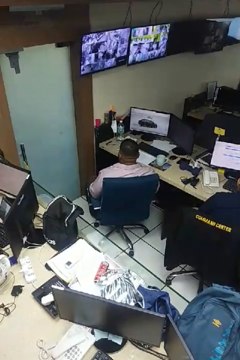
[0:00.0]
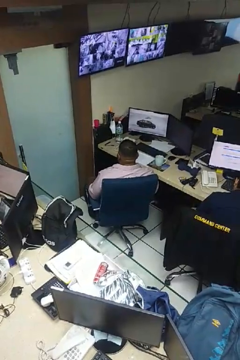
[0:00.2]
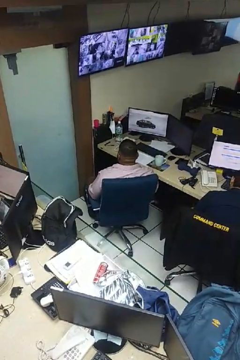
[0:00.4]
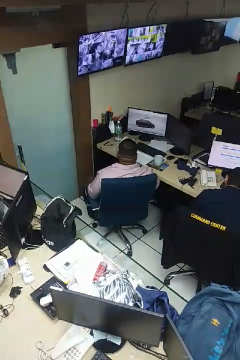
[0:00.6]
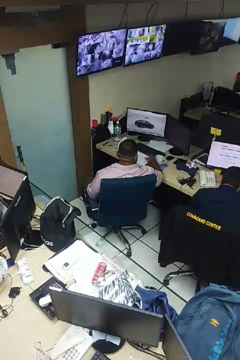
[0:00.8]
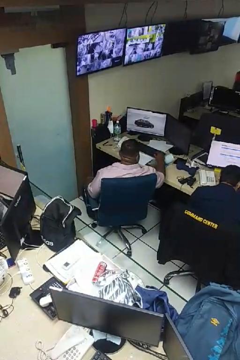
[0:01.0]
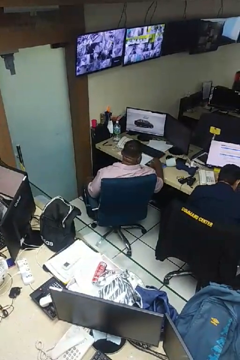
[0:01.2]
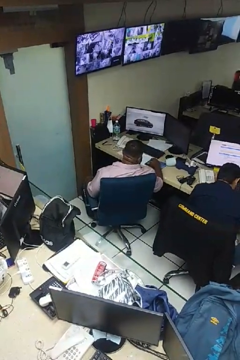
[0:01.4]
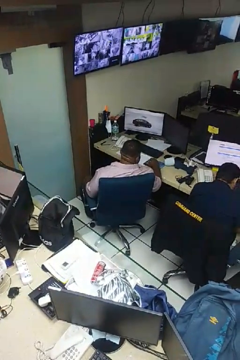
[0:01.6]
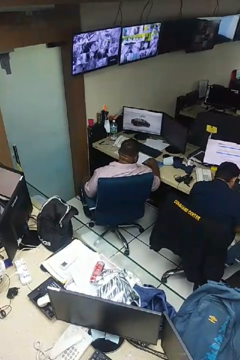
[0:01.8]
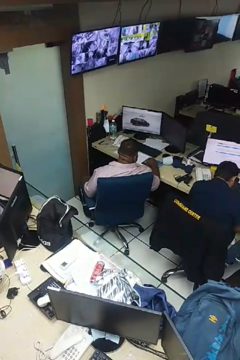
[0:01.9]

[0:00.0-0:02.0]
person knocks over glass

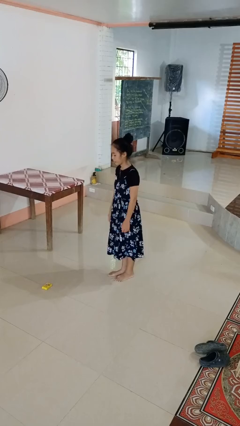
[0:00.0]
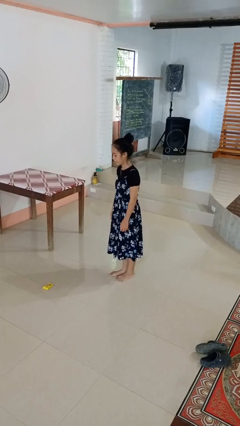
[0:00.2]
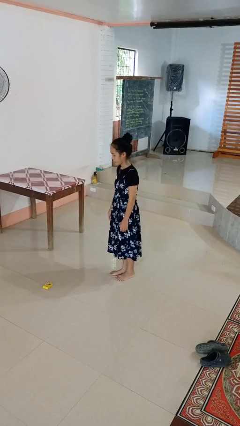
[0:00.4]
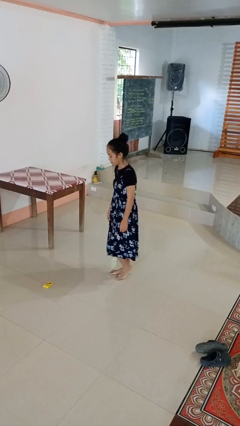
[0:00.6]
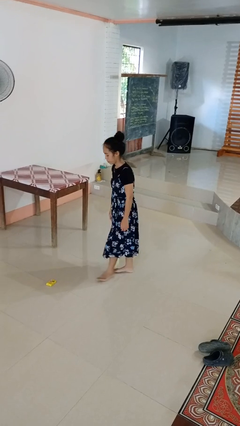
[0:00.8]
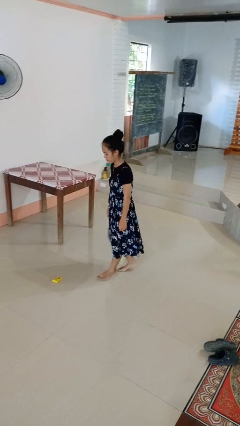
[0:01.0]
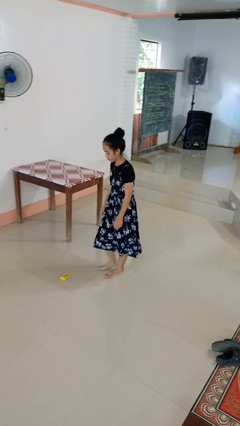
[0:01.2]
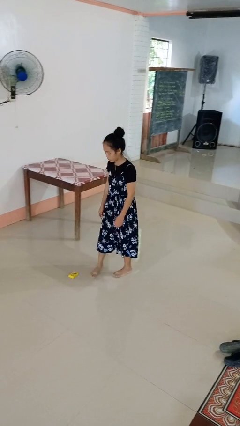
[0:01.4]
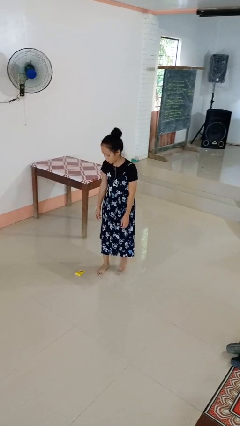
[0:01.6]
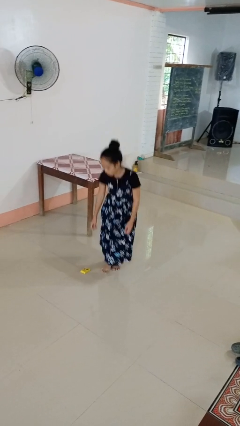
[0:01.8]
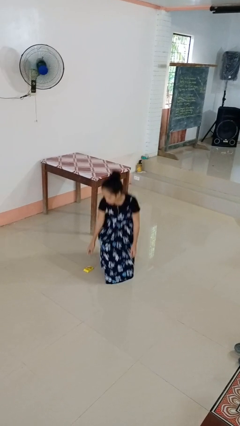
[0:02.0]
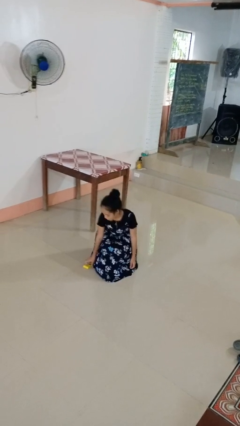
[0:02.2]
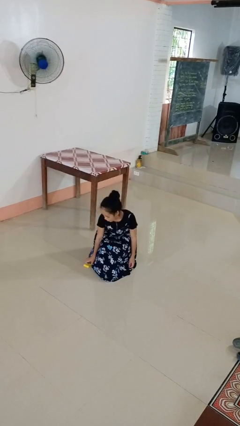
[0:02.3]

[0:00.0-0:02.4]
person throws object to ground

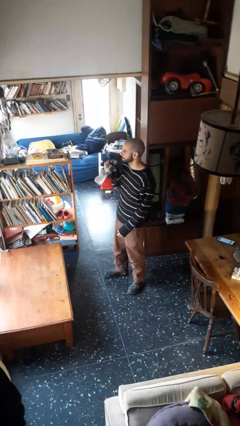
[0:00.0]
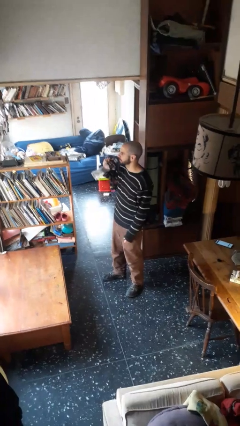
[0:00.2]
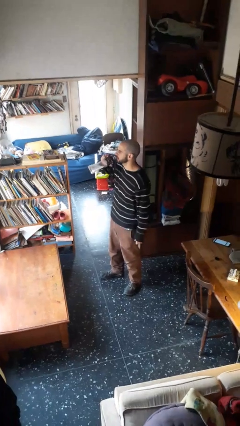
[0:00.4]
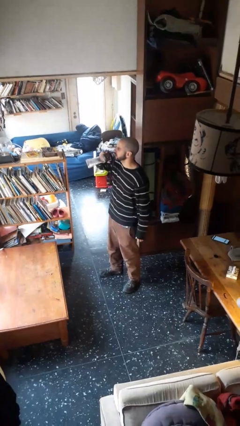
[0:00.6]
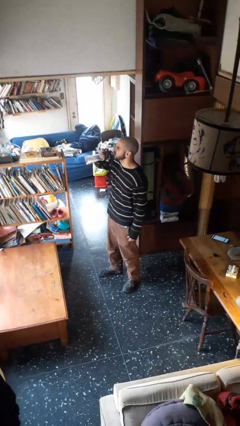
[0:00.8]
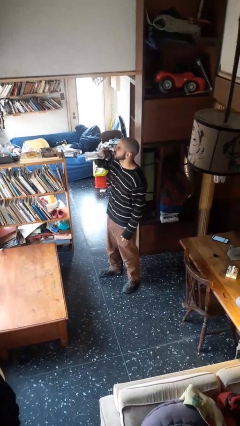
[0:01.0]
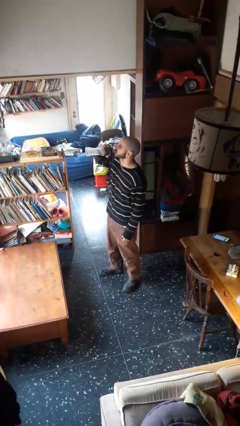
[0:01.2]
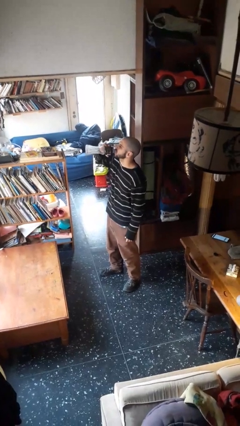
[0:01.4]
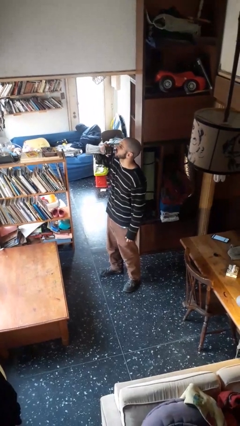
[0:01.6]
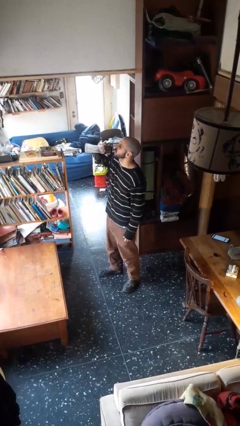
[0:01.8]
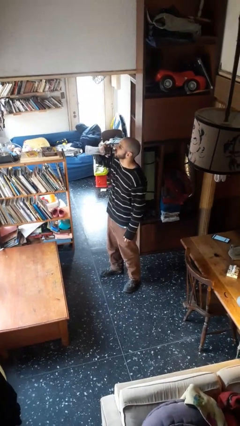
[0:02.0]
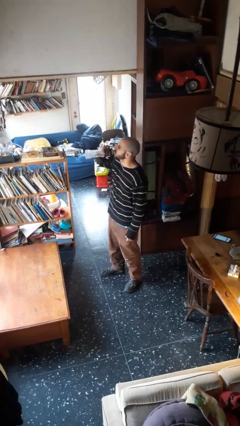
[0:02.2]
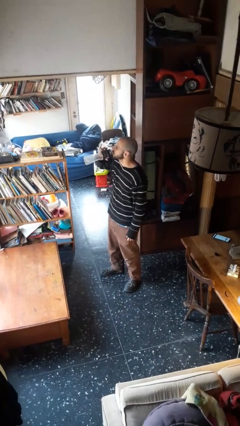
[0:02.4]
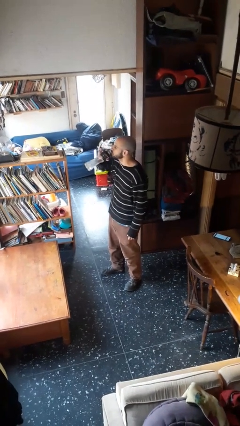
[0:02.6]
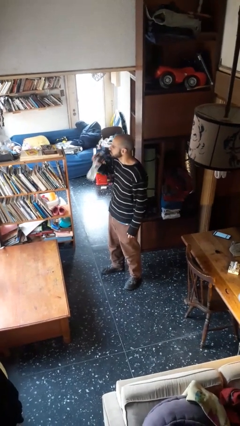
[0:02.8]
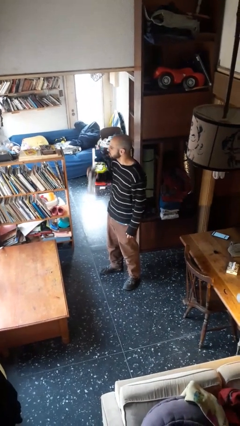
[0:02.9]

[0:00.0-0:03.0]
person drinks from bottle

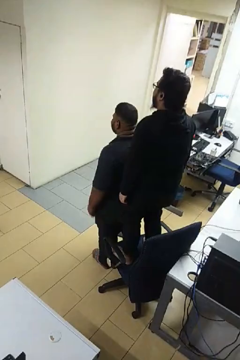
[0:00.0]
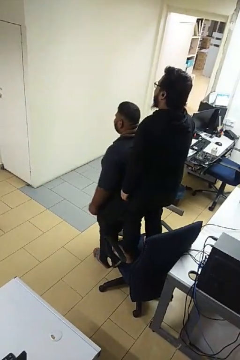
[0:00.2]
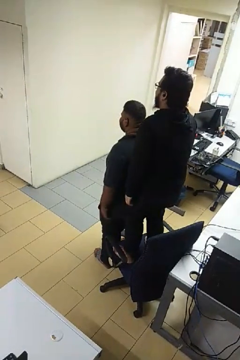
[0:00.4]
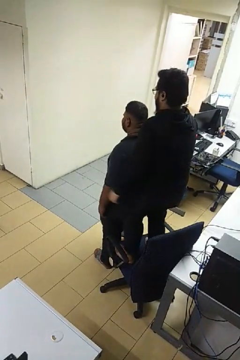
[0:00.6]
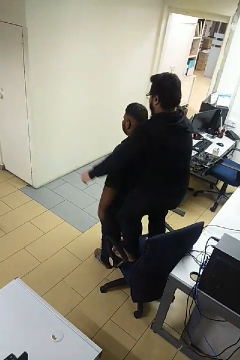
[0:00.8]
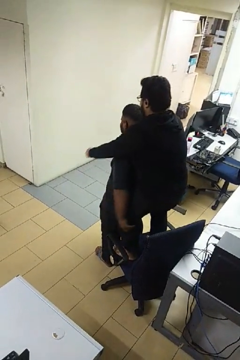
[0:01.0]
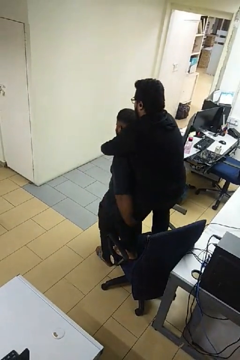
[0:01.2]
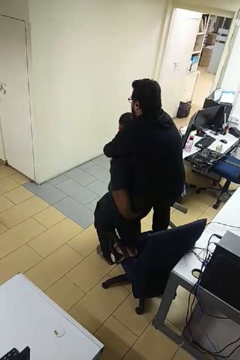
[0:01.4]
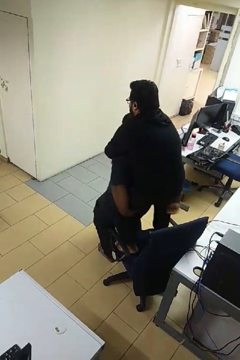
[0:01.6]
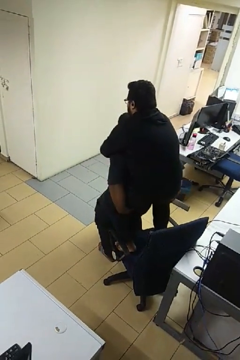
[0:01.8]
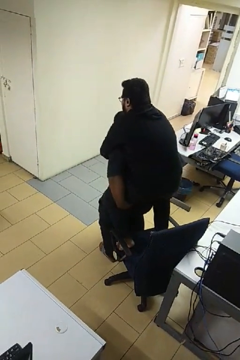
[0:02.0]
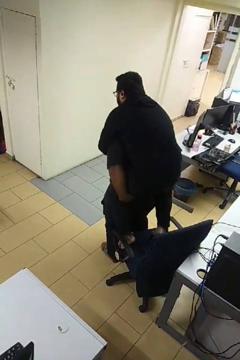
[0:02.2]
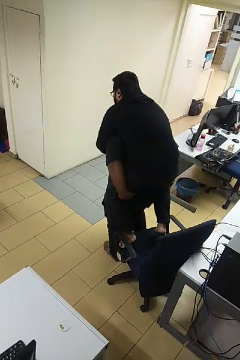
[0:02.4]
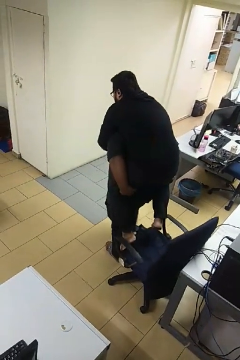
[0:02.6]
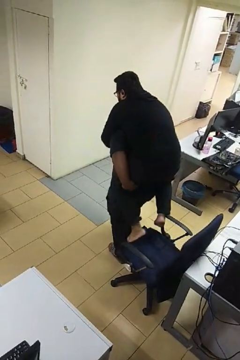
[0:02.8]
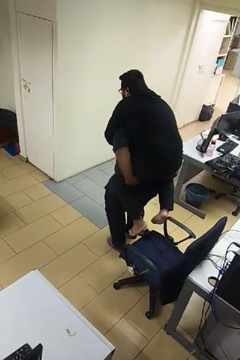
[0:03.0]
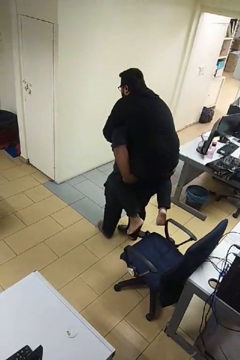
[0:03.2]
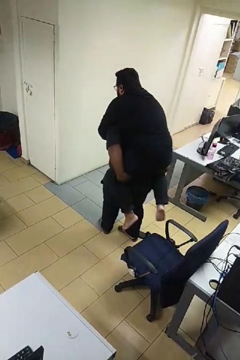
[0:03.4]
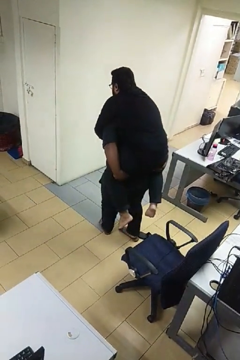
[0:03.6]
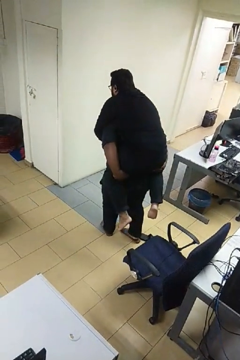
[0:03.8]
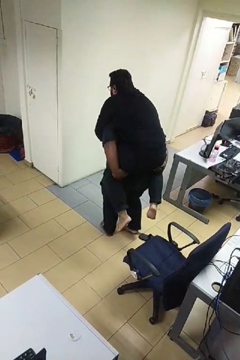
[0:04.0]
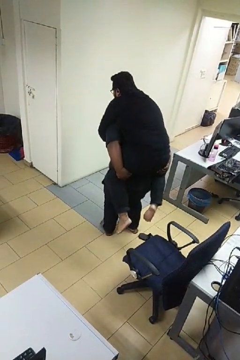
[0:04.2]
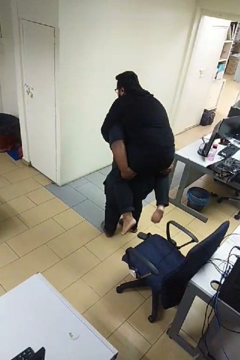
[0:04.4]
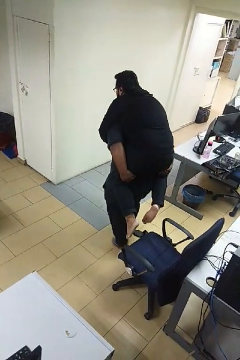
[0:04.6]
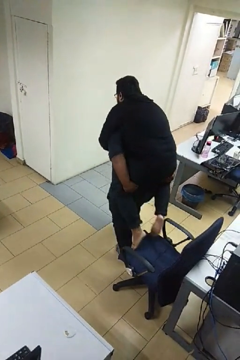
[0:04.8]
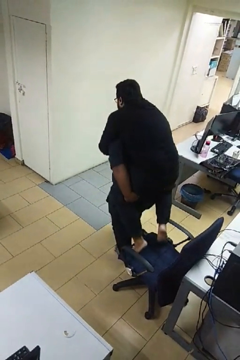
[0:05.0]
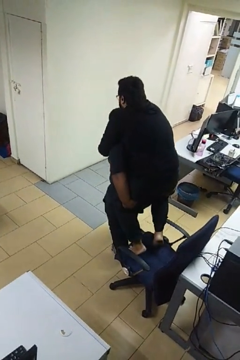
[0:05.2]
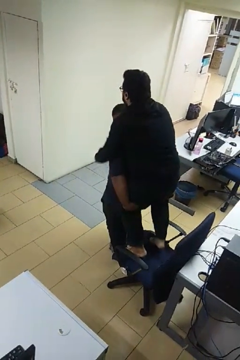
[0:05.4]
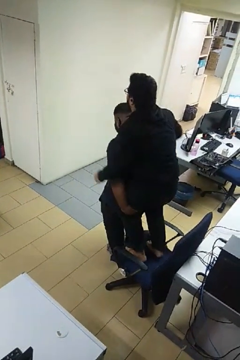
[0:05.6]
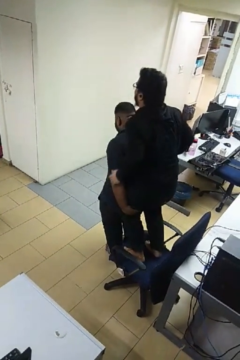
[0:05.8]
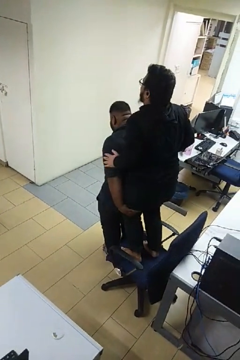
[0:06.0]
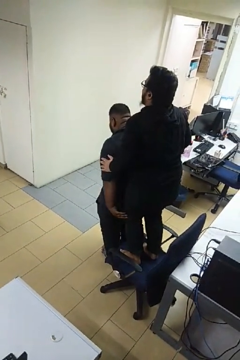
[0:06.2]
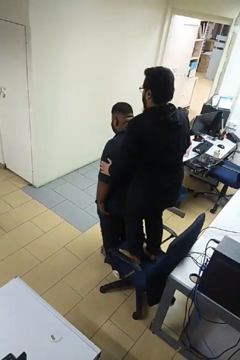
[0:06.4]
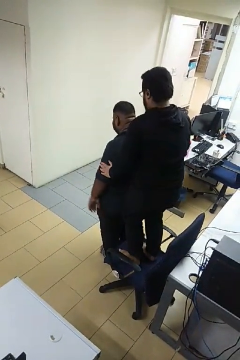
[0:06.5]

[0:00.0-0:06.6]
person carries person on back

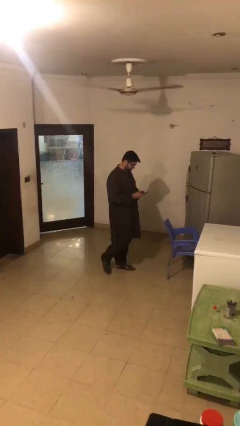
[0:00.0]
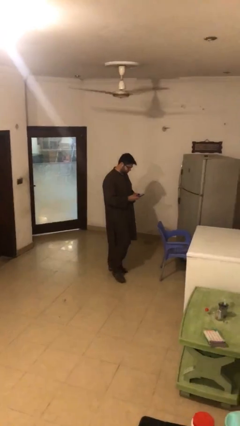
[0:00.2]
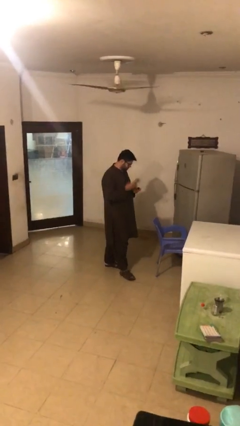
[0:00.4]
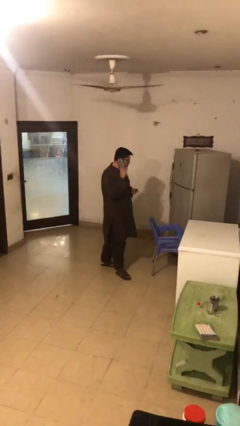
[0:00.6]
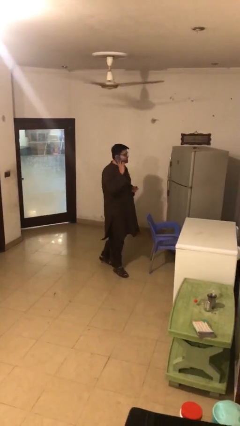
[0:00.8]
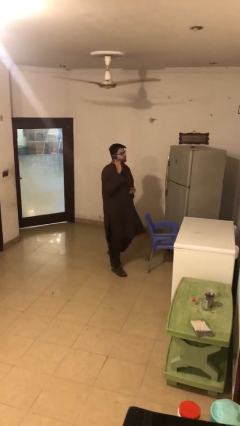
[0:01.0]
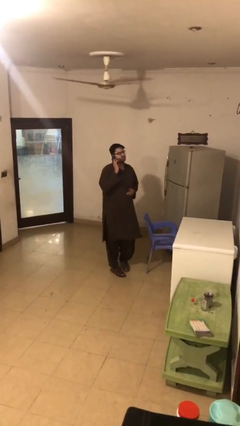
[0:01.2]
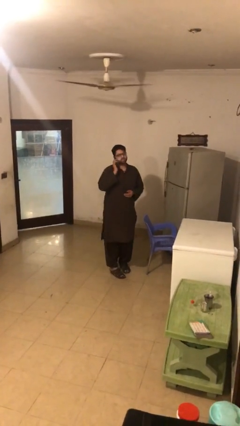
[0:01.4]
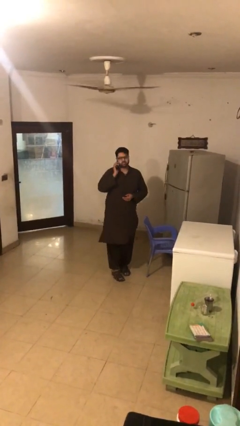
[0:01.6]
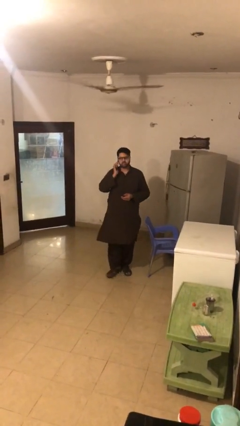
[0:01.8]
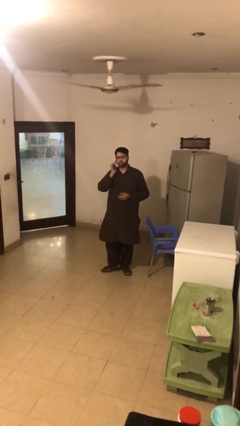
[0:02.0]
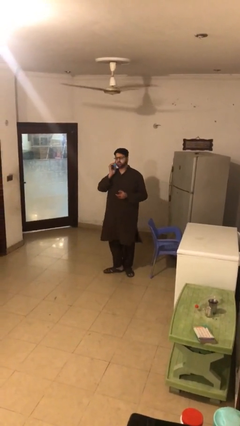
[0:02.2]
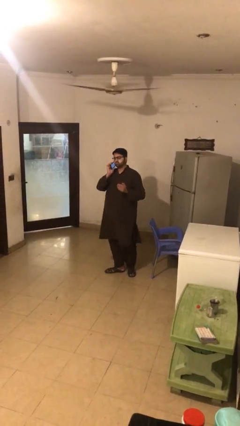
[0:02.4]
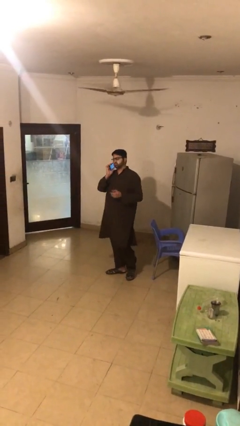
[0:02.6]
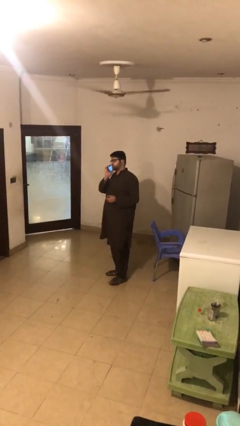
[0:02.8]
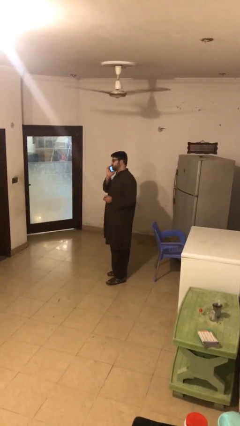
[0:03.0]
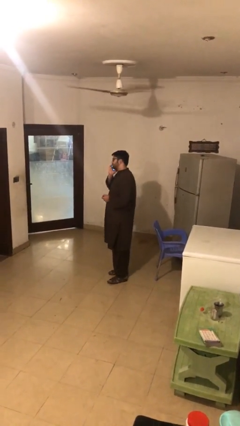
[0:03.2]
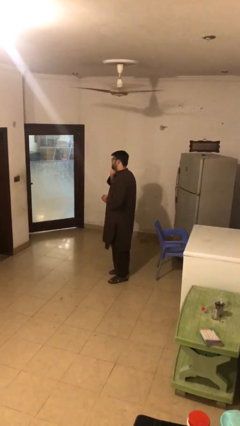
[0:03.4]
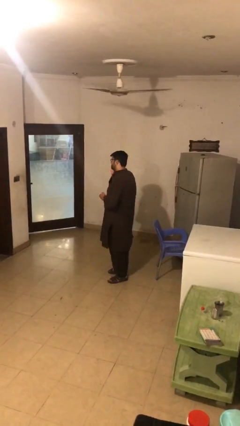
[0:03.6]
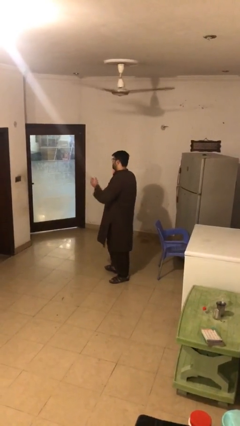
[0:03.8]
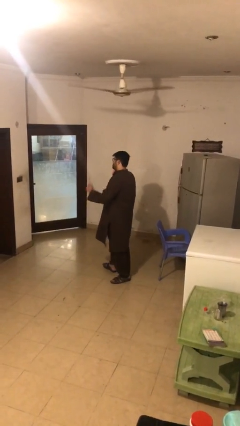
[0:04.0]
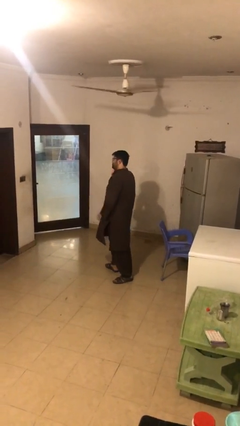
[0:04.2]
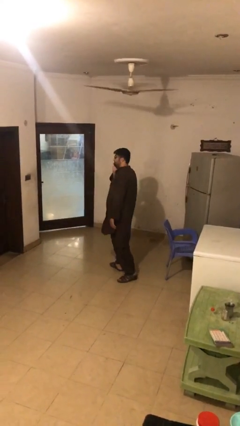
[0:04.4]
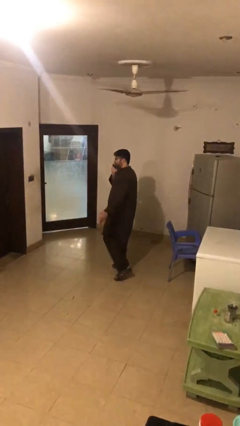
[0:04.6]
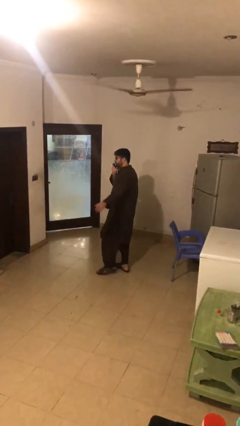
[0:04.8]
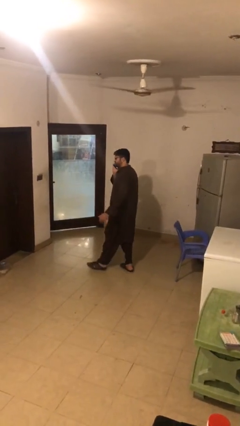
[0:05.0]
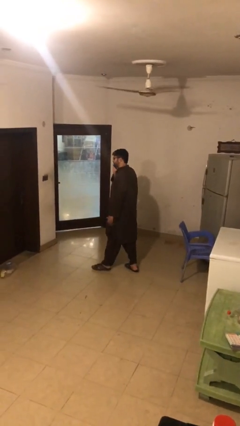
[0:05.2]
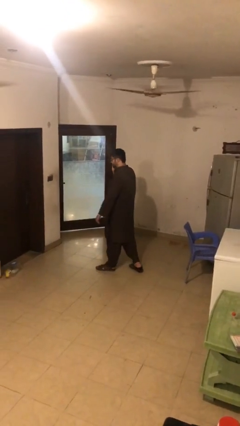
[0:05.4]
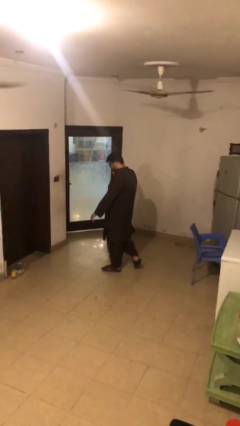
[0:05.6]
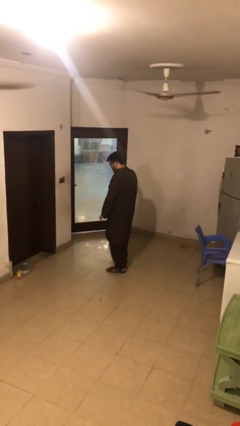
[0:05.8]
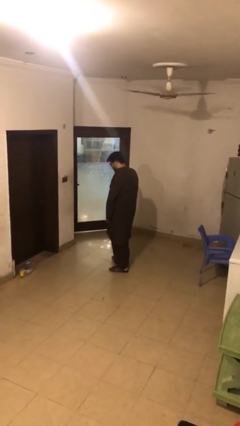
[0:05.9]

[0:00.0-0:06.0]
person talks on phone
